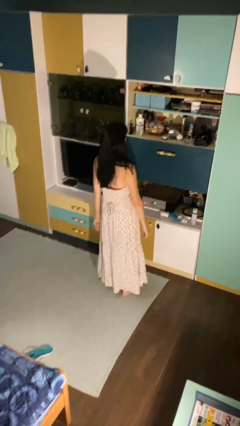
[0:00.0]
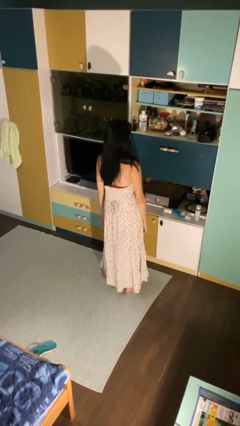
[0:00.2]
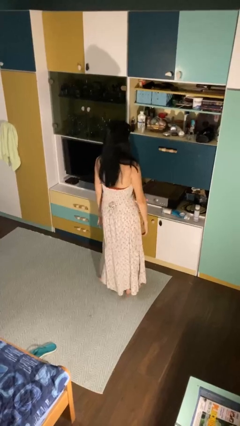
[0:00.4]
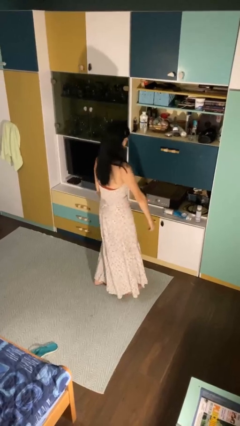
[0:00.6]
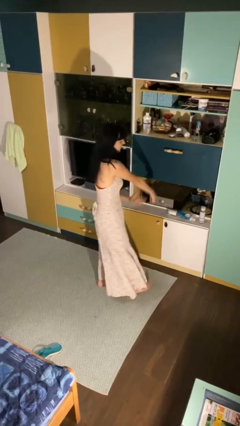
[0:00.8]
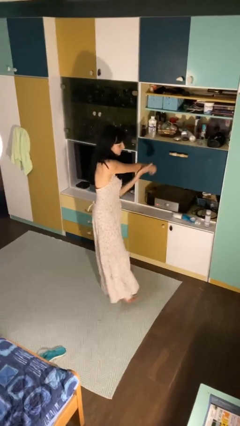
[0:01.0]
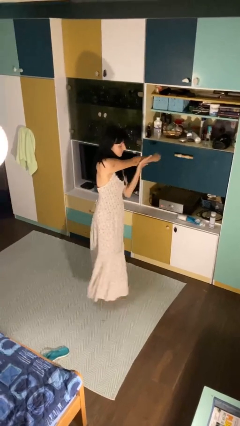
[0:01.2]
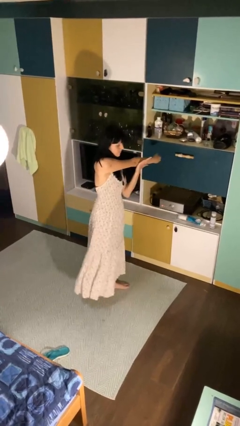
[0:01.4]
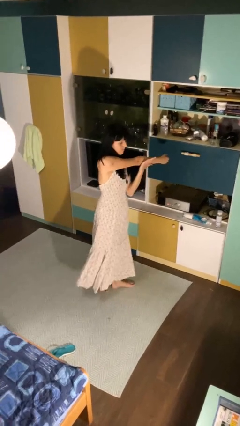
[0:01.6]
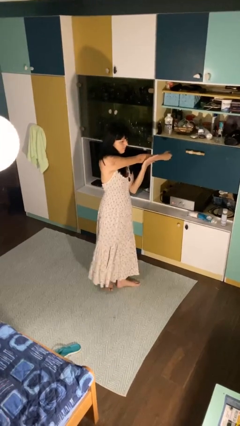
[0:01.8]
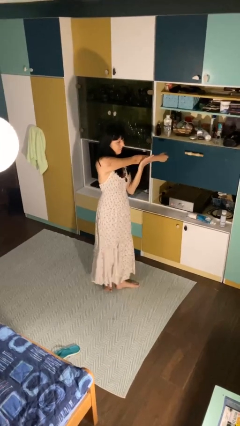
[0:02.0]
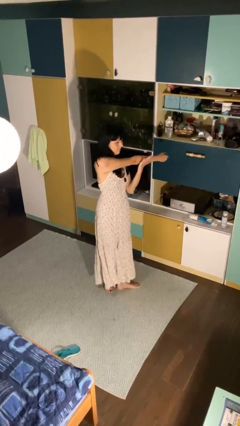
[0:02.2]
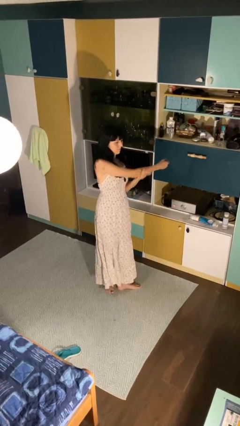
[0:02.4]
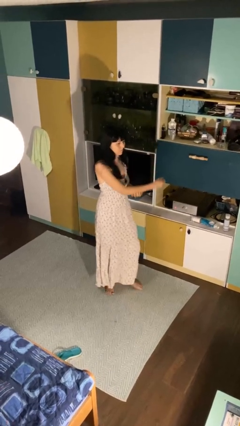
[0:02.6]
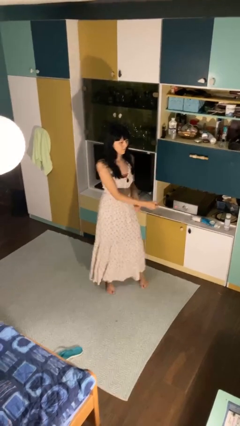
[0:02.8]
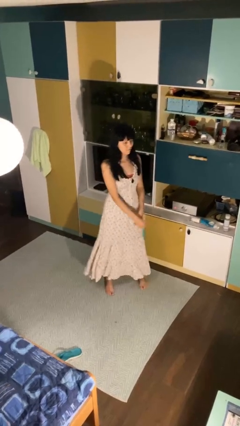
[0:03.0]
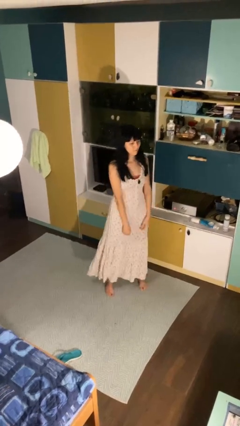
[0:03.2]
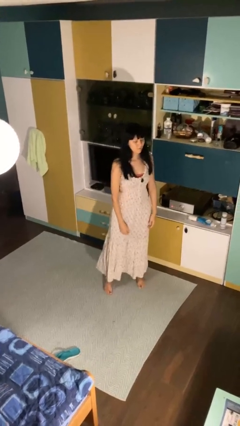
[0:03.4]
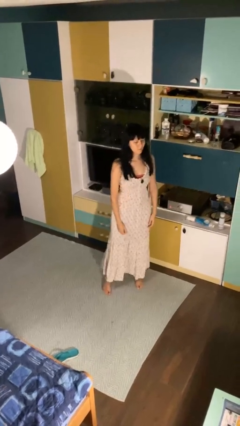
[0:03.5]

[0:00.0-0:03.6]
person stretches arms to side

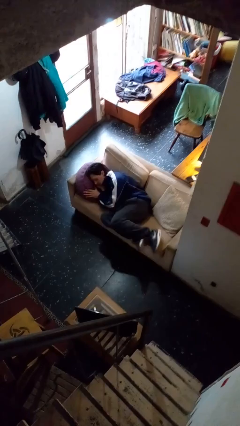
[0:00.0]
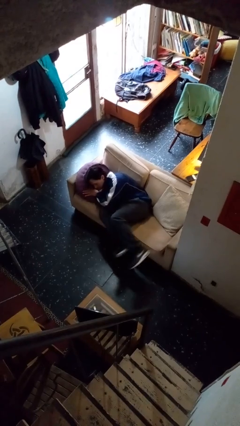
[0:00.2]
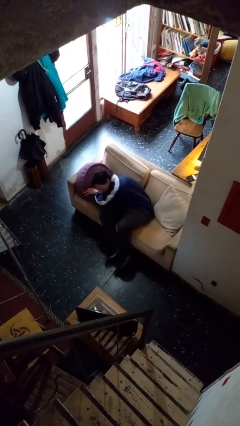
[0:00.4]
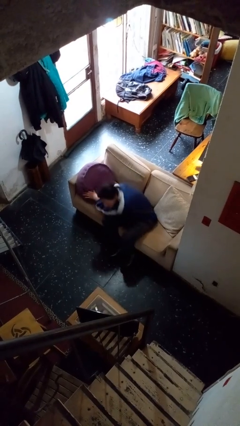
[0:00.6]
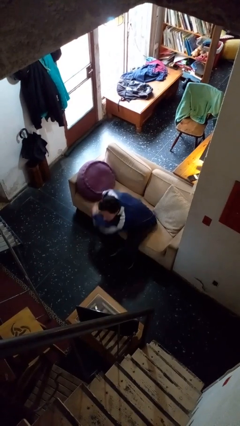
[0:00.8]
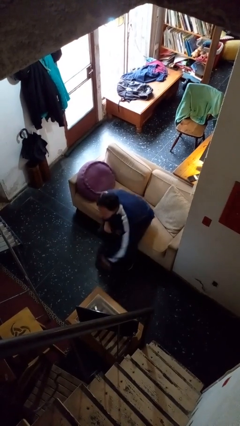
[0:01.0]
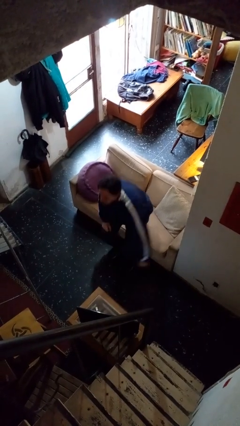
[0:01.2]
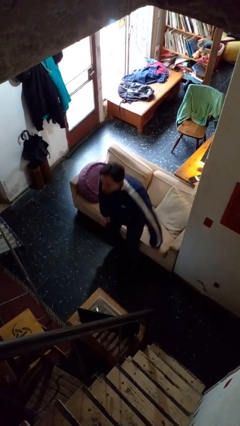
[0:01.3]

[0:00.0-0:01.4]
person stands up

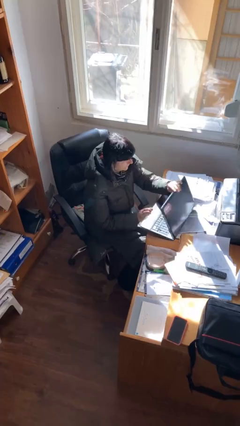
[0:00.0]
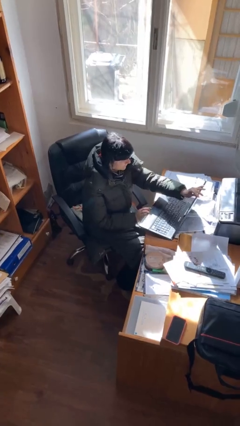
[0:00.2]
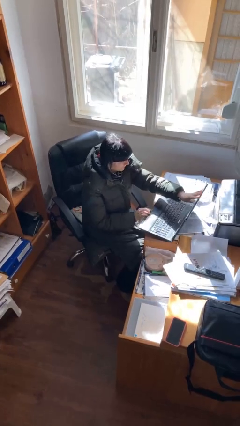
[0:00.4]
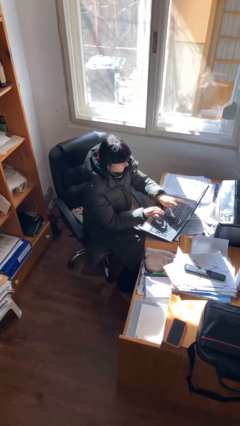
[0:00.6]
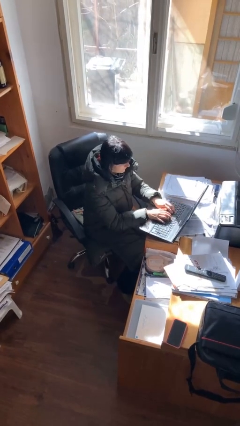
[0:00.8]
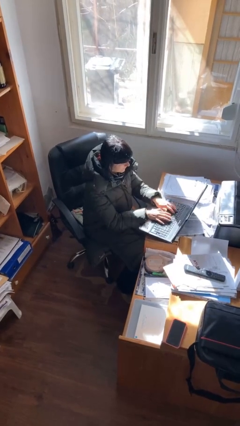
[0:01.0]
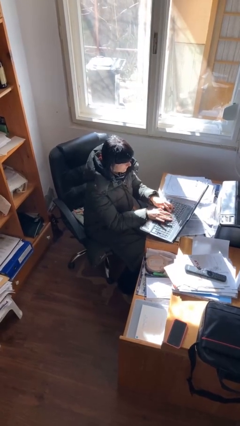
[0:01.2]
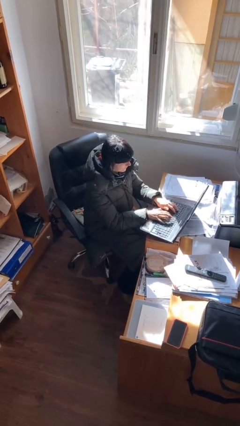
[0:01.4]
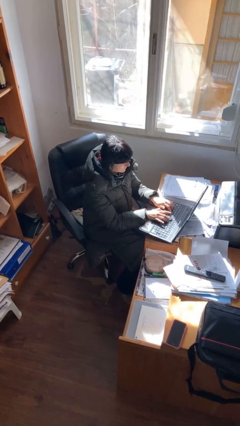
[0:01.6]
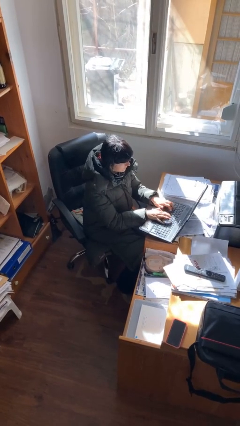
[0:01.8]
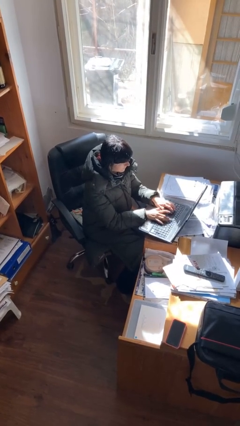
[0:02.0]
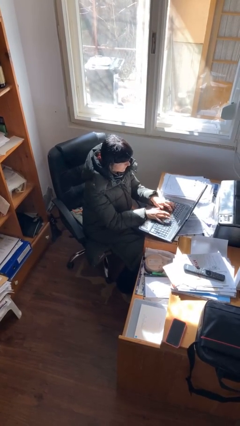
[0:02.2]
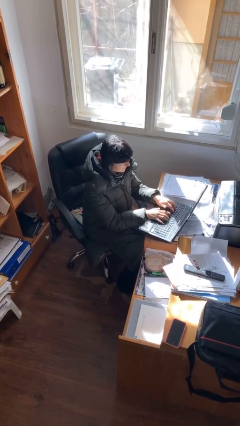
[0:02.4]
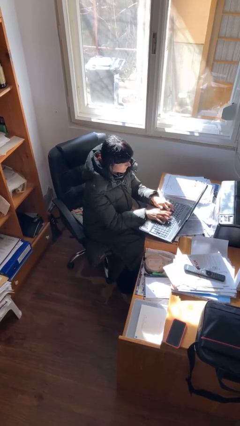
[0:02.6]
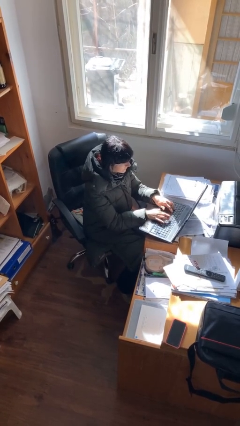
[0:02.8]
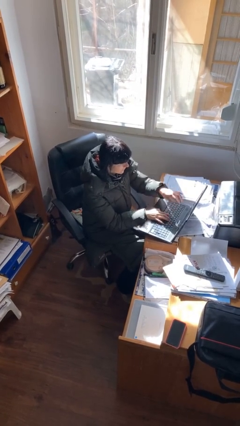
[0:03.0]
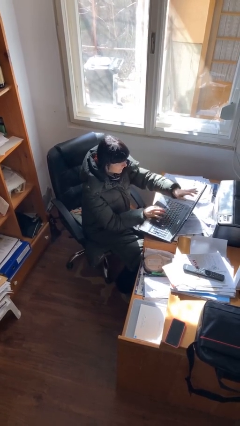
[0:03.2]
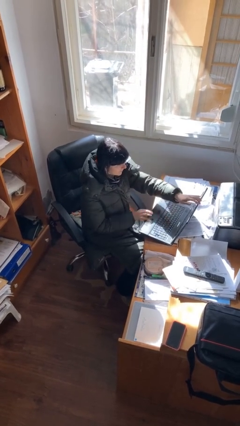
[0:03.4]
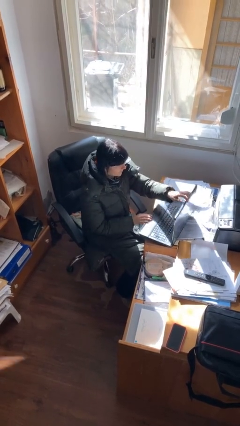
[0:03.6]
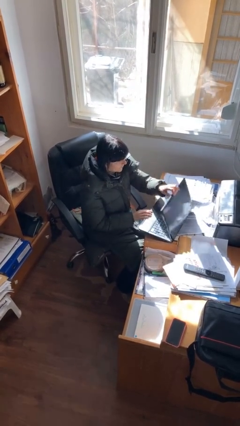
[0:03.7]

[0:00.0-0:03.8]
person interacts with laptop

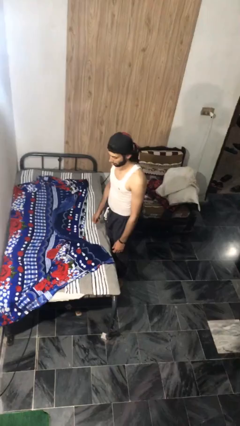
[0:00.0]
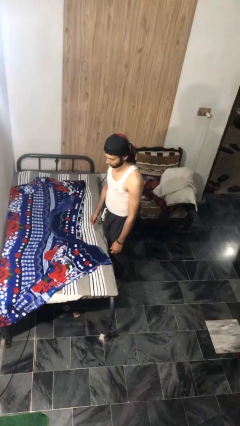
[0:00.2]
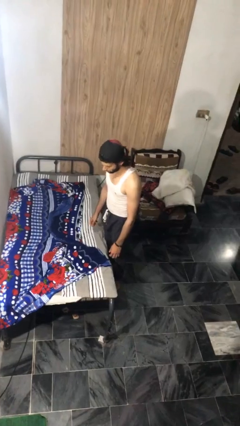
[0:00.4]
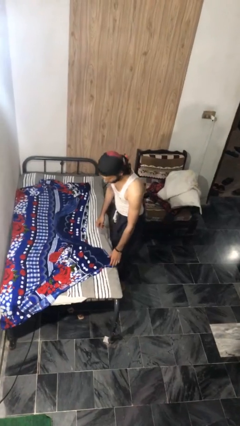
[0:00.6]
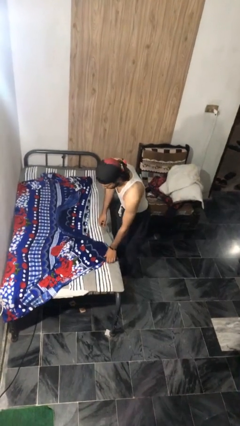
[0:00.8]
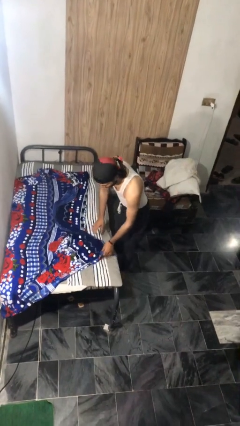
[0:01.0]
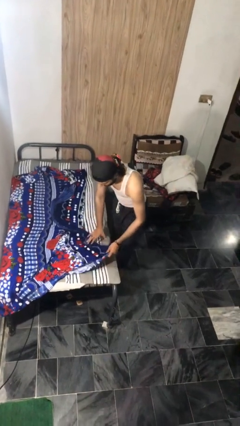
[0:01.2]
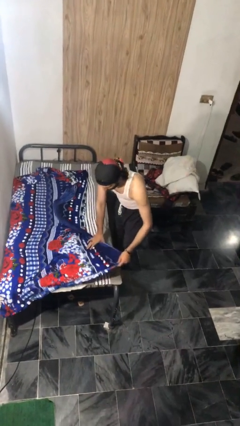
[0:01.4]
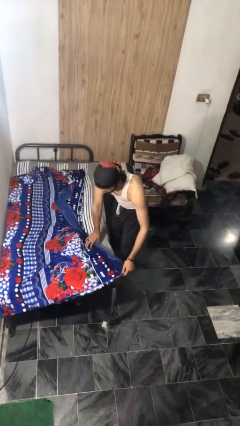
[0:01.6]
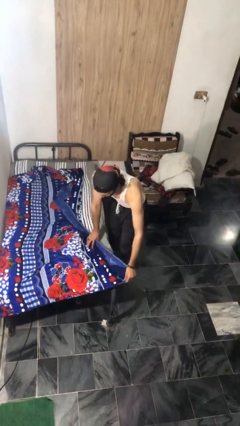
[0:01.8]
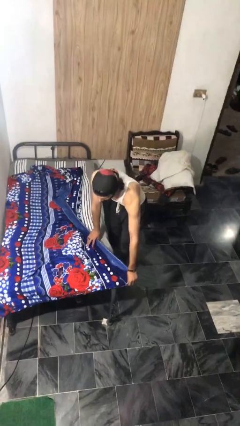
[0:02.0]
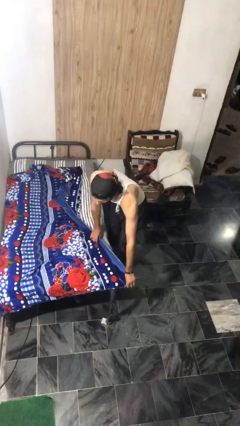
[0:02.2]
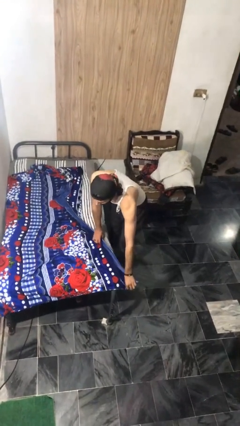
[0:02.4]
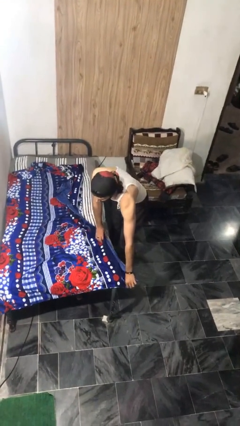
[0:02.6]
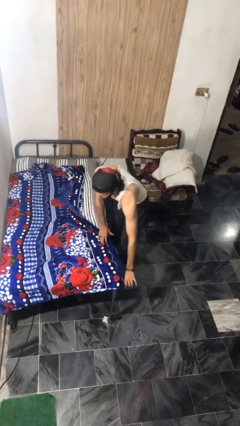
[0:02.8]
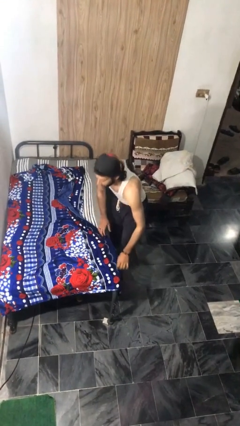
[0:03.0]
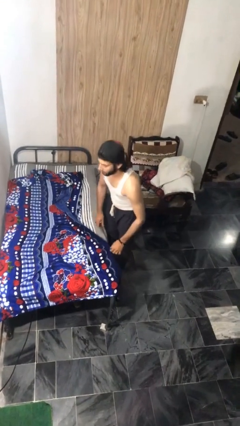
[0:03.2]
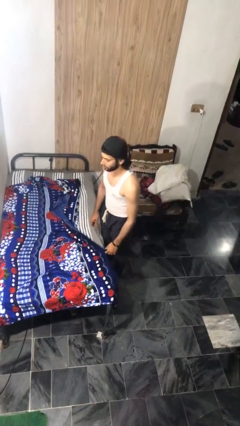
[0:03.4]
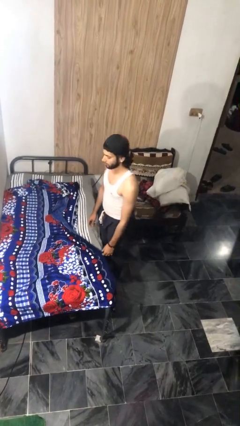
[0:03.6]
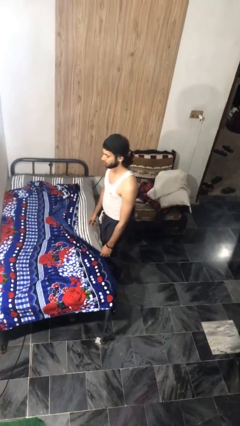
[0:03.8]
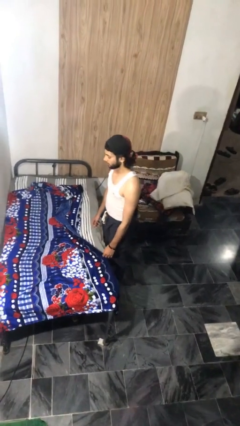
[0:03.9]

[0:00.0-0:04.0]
person makes bed

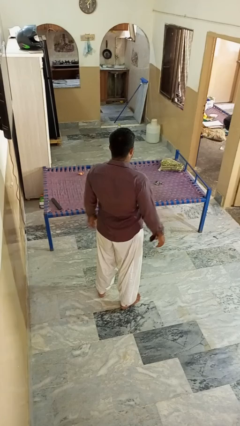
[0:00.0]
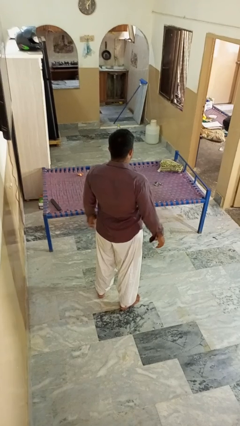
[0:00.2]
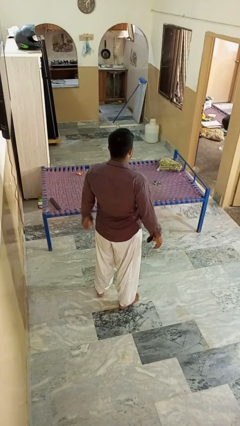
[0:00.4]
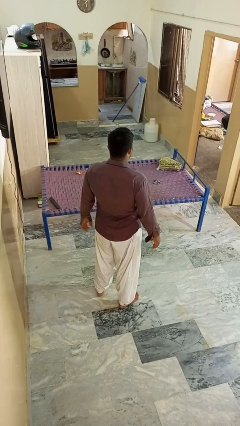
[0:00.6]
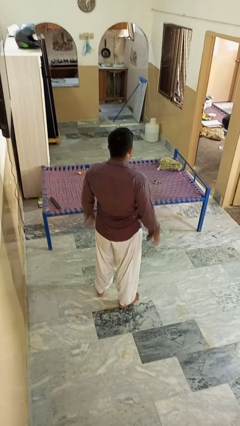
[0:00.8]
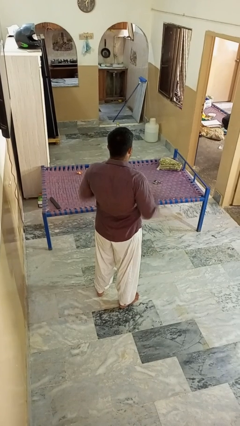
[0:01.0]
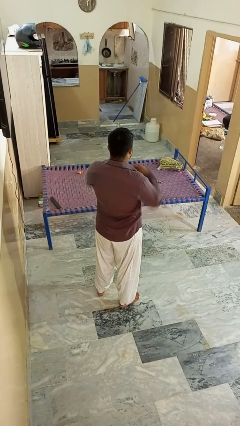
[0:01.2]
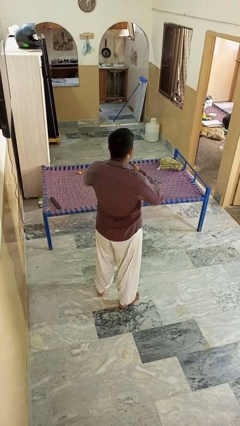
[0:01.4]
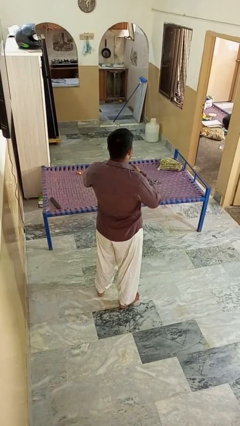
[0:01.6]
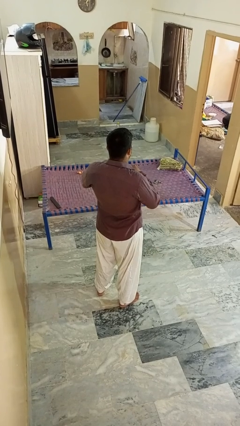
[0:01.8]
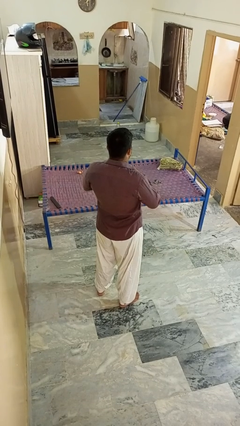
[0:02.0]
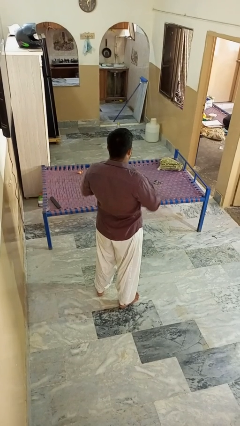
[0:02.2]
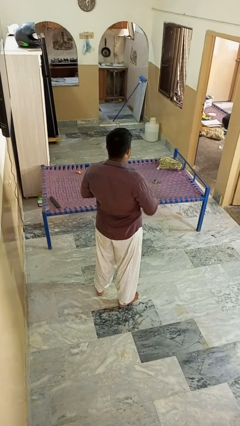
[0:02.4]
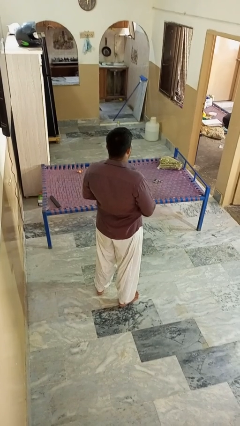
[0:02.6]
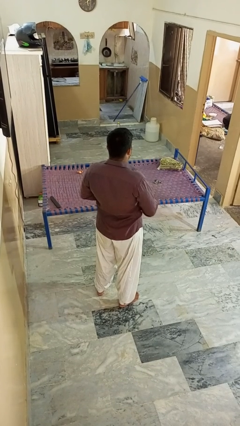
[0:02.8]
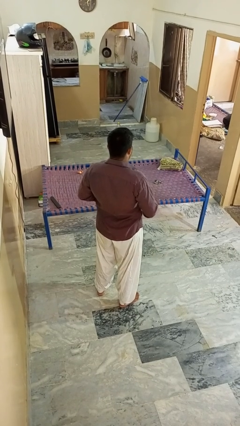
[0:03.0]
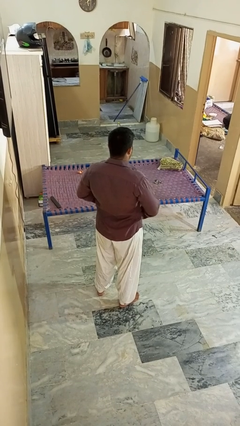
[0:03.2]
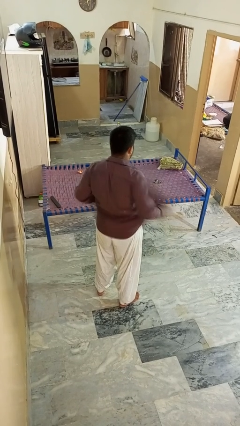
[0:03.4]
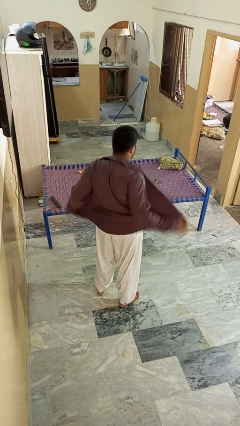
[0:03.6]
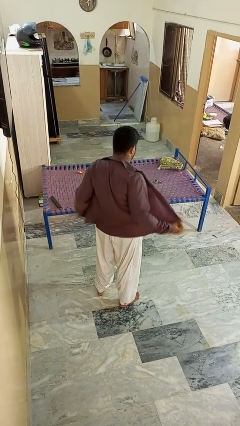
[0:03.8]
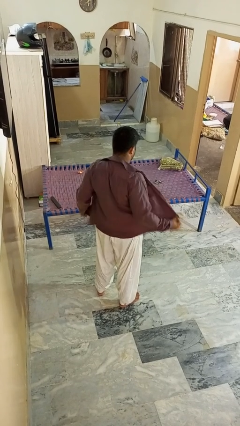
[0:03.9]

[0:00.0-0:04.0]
person unbuttons shirt

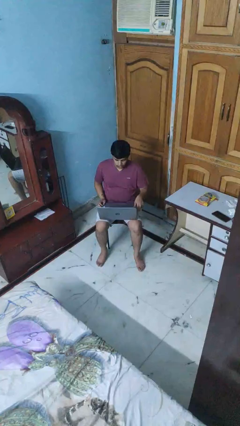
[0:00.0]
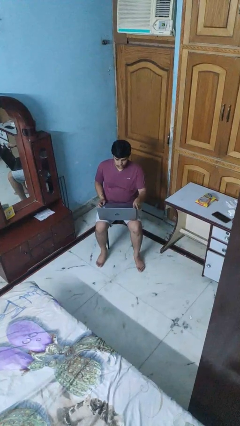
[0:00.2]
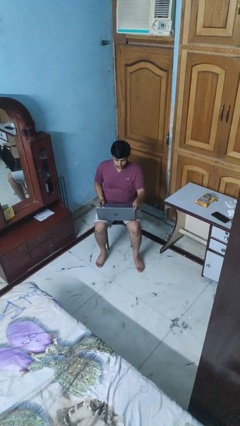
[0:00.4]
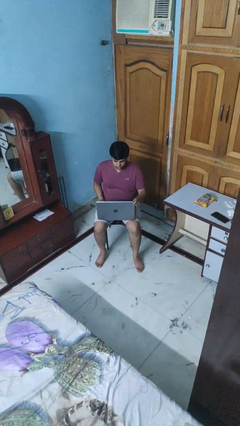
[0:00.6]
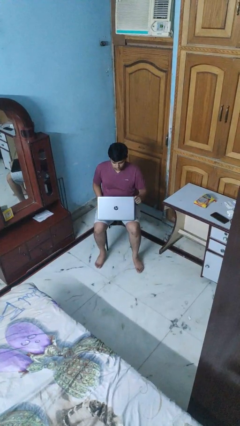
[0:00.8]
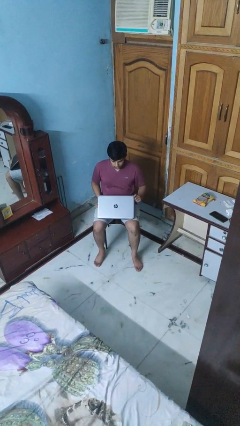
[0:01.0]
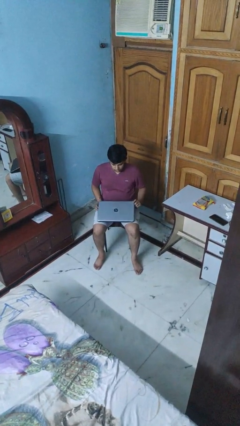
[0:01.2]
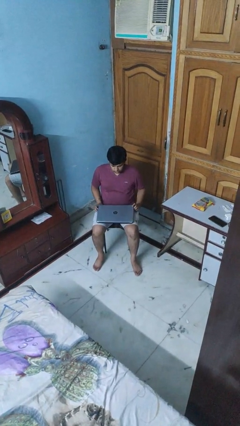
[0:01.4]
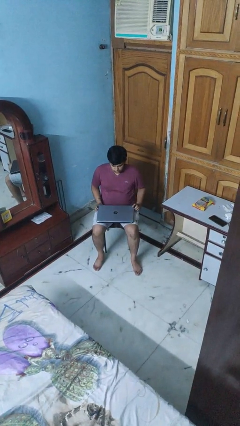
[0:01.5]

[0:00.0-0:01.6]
person closes laptop
